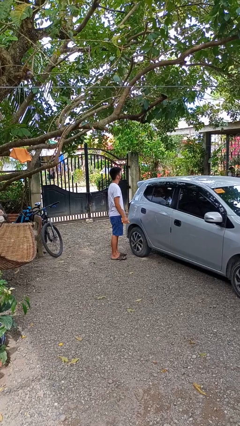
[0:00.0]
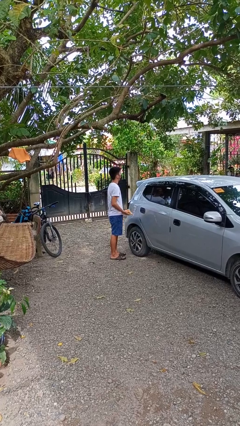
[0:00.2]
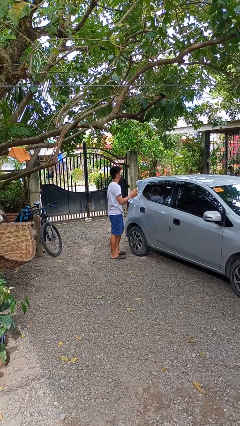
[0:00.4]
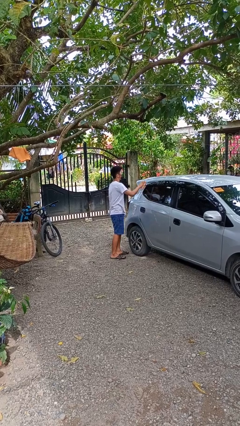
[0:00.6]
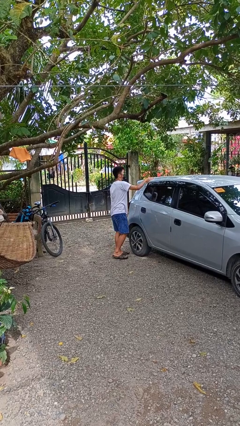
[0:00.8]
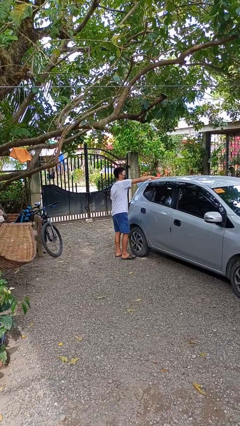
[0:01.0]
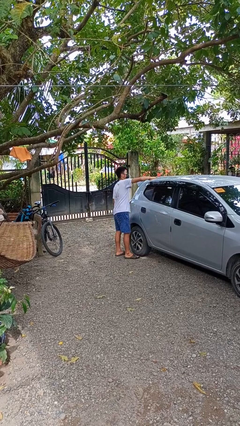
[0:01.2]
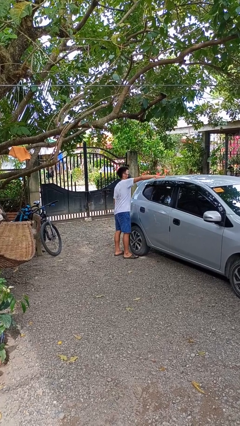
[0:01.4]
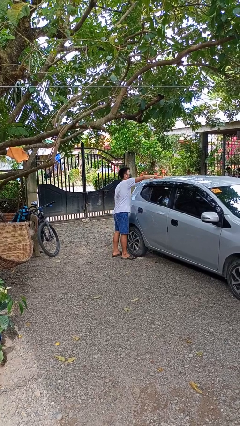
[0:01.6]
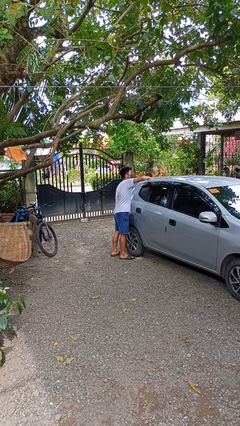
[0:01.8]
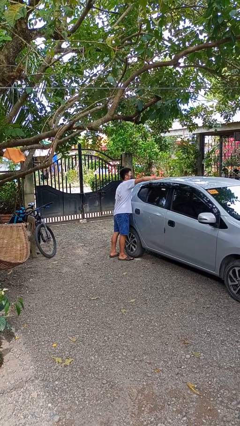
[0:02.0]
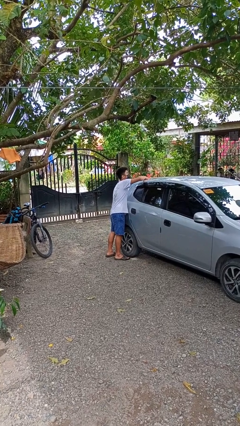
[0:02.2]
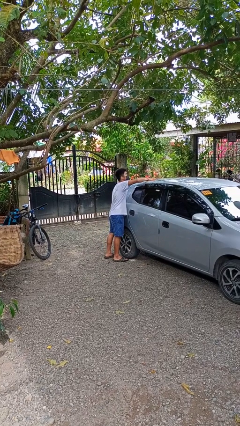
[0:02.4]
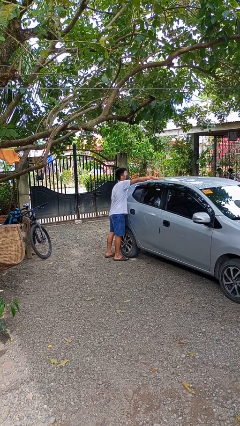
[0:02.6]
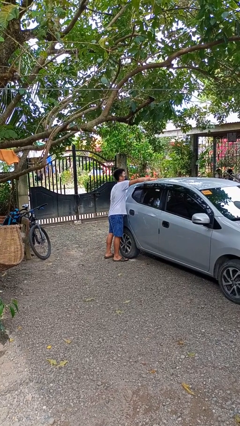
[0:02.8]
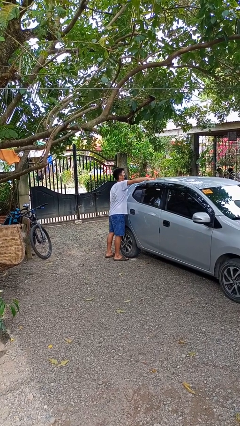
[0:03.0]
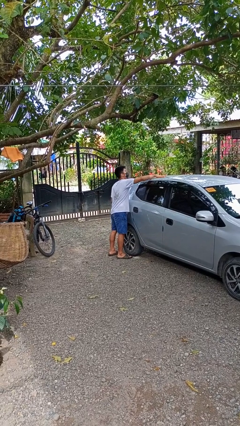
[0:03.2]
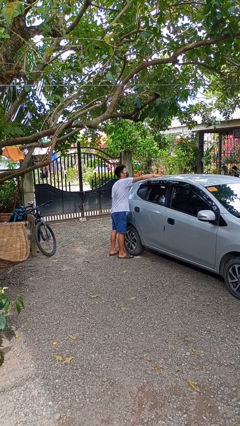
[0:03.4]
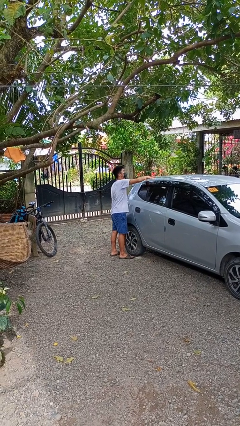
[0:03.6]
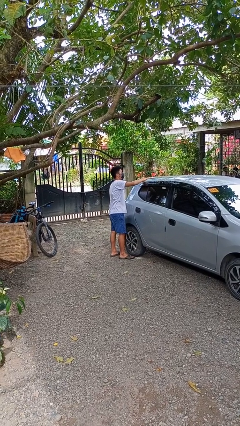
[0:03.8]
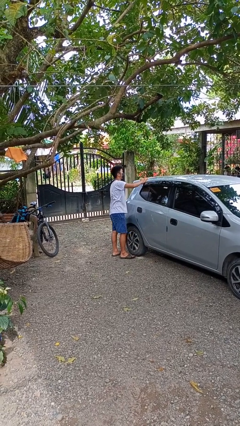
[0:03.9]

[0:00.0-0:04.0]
person polishes car with rag

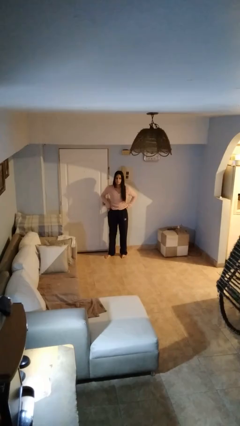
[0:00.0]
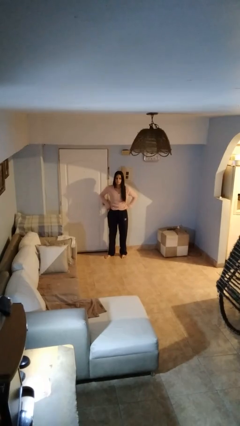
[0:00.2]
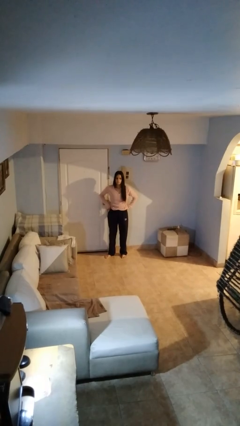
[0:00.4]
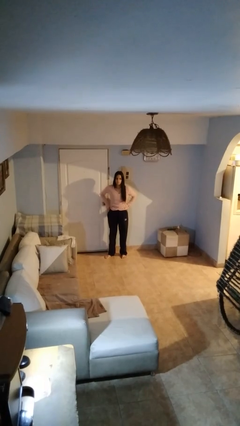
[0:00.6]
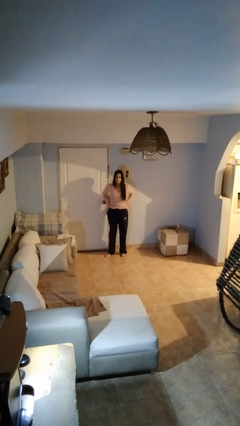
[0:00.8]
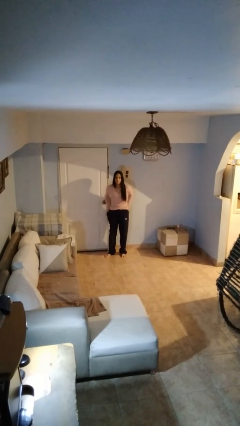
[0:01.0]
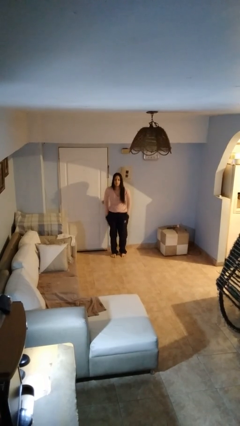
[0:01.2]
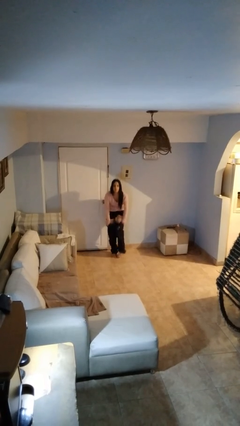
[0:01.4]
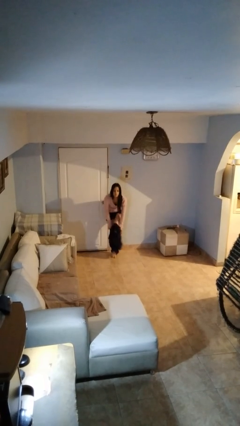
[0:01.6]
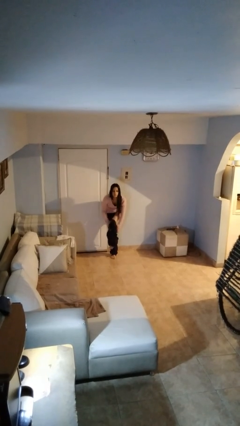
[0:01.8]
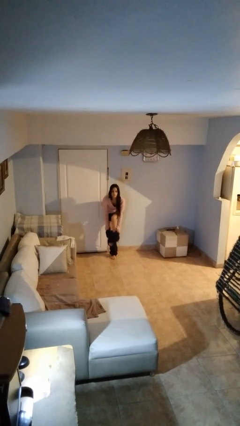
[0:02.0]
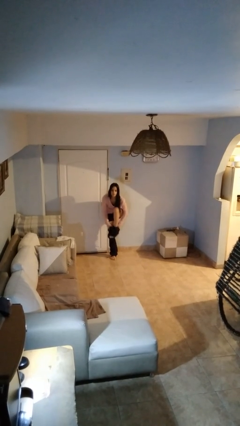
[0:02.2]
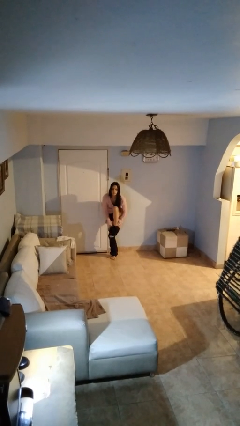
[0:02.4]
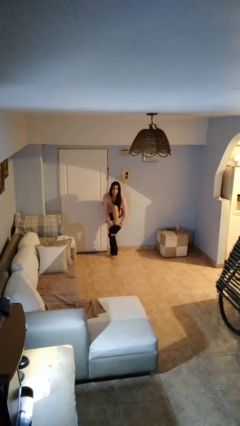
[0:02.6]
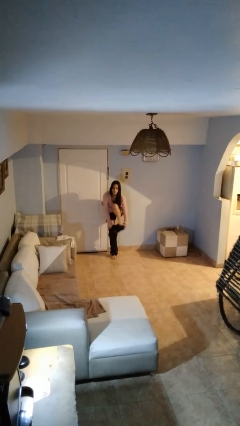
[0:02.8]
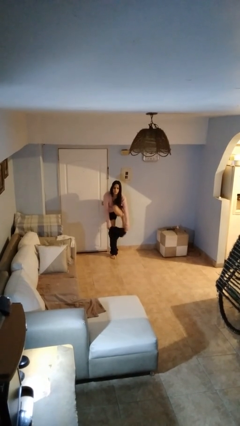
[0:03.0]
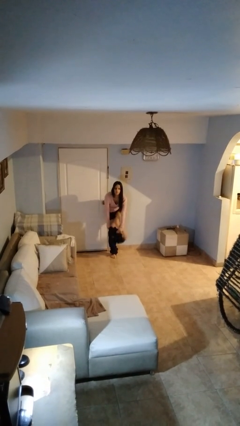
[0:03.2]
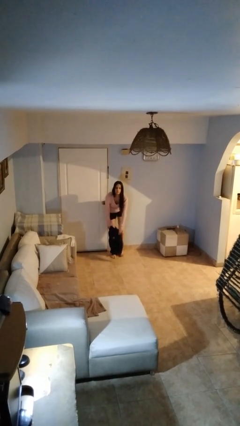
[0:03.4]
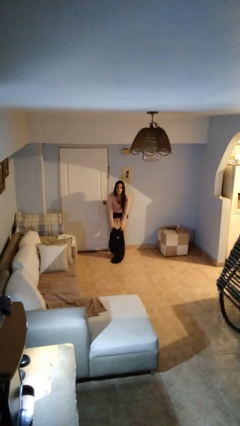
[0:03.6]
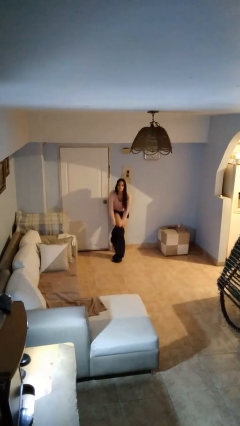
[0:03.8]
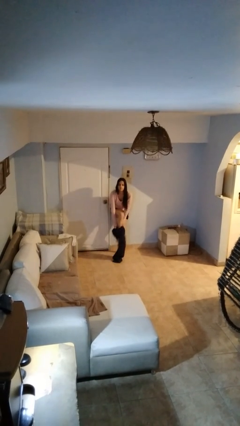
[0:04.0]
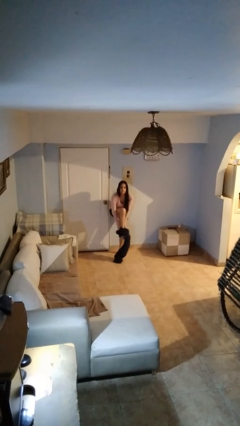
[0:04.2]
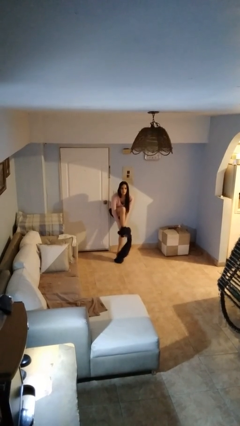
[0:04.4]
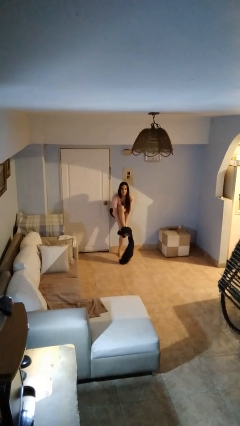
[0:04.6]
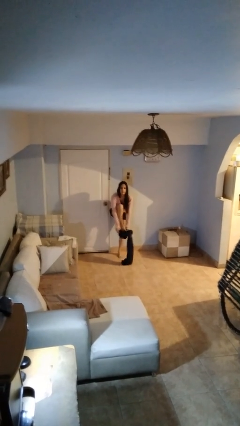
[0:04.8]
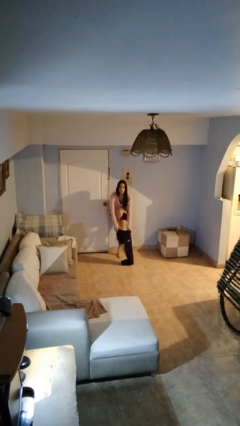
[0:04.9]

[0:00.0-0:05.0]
person puts on pants

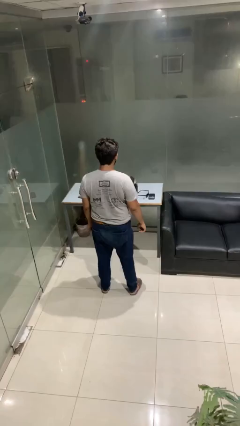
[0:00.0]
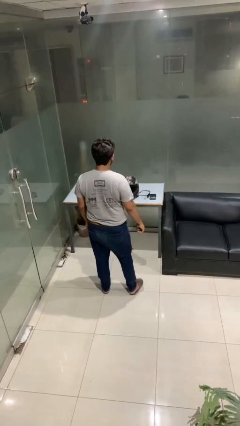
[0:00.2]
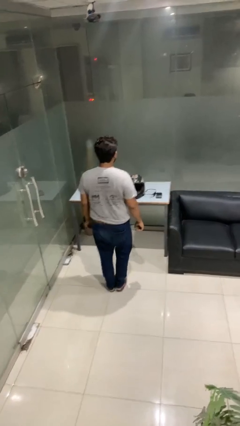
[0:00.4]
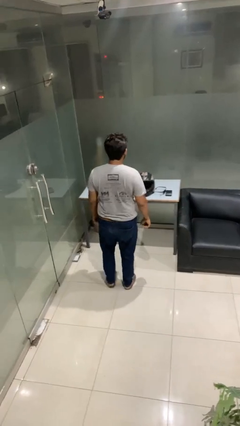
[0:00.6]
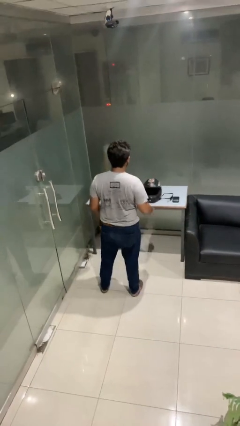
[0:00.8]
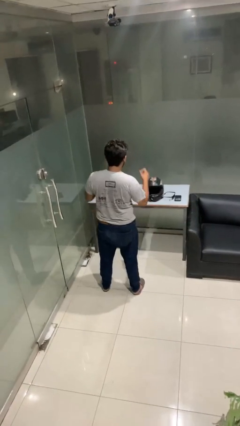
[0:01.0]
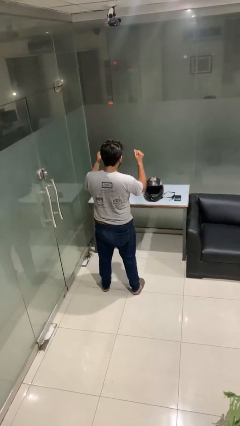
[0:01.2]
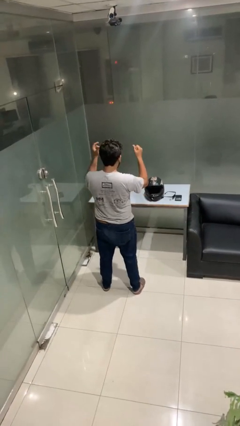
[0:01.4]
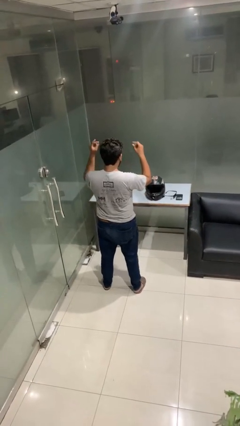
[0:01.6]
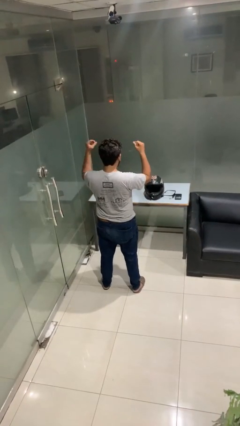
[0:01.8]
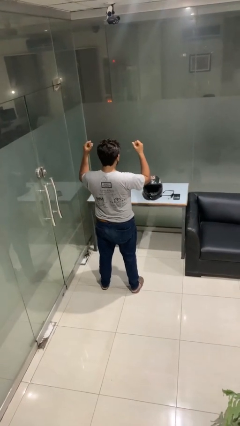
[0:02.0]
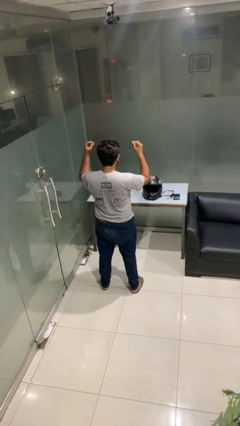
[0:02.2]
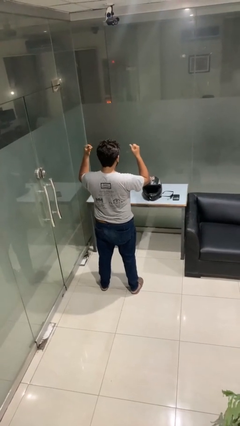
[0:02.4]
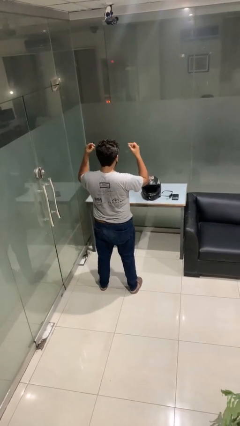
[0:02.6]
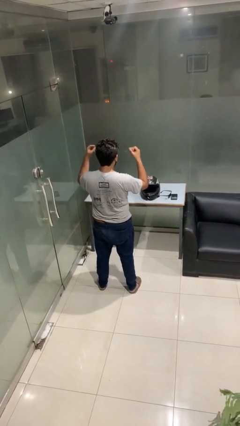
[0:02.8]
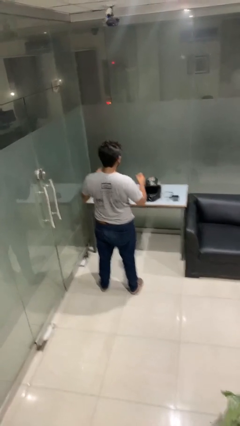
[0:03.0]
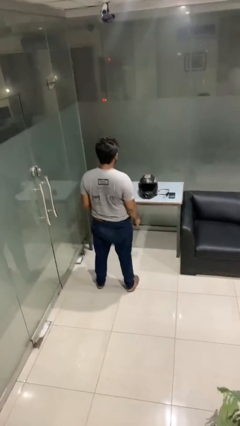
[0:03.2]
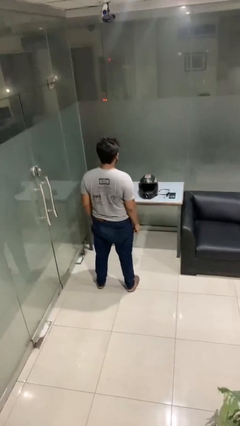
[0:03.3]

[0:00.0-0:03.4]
person snaps fingers

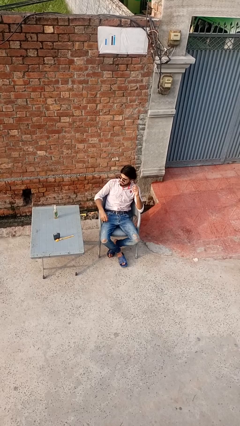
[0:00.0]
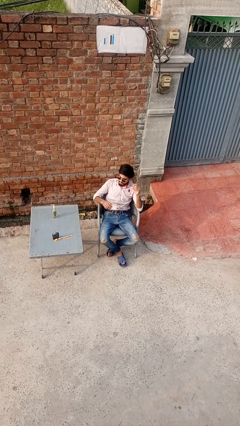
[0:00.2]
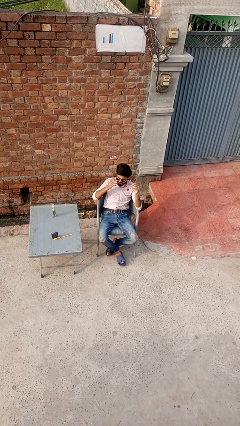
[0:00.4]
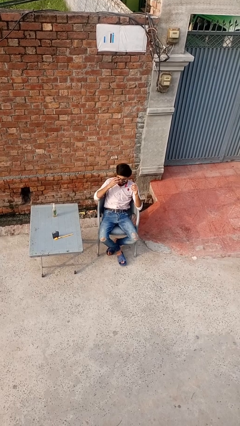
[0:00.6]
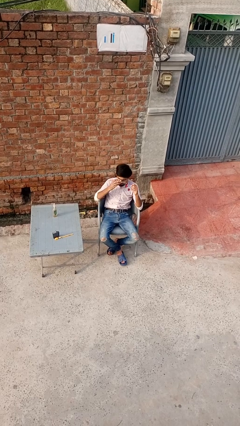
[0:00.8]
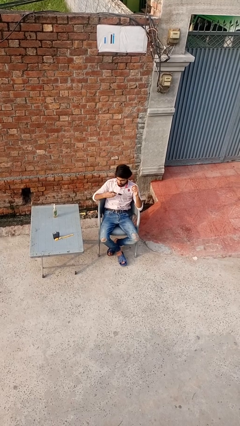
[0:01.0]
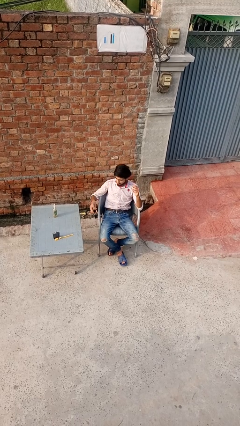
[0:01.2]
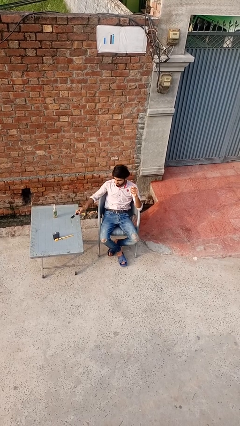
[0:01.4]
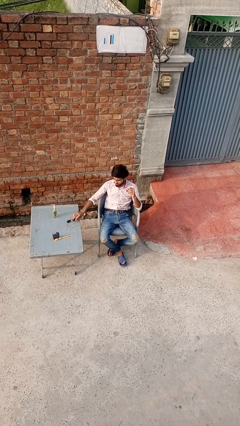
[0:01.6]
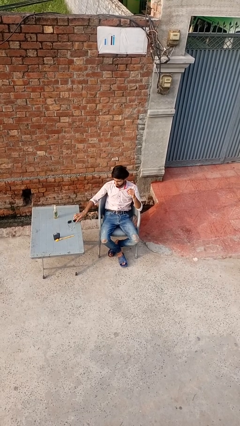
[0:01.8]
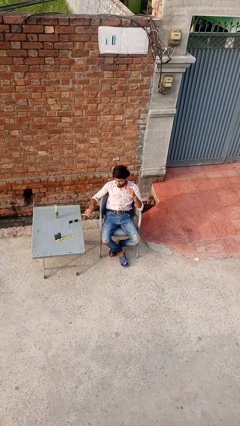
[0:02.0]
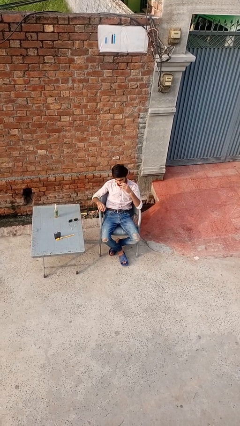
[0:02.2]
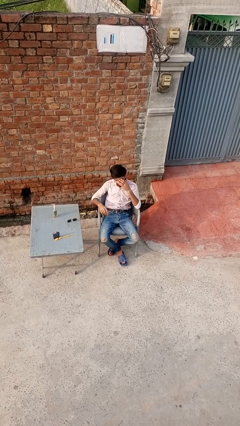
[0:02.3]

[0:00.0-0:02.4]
person takes off sunglasses

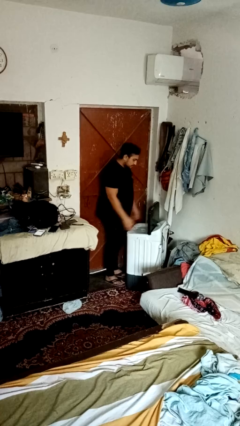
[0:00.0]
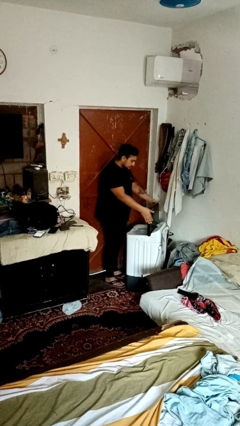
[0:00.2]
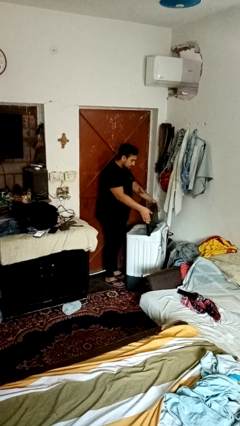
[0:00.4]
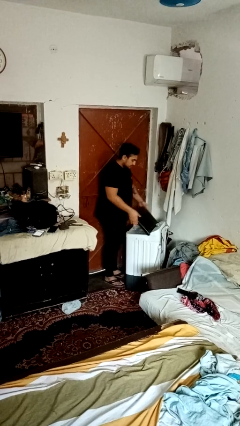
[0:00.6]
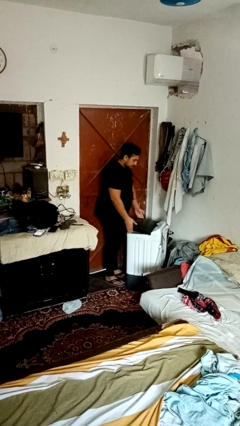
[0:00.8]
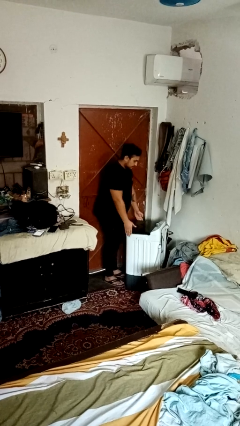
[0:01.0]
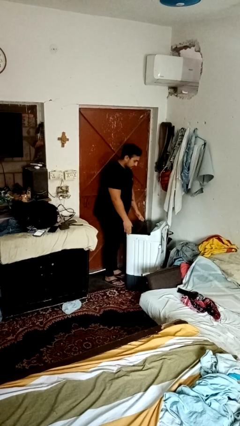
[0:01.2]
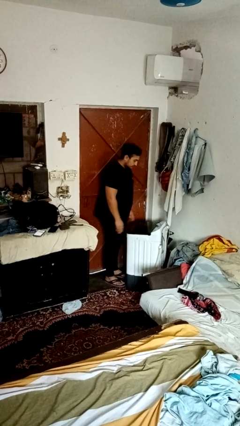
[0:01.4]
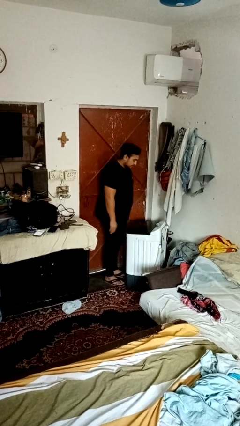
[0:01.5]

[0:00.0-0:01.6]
person closes clothes washer

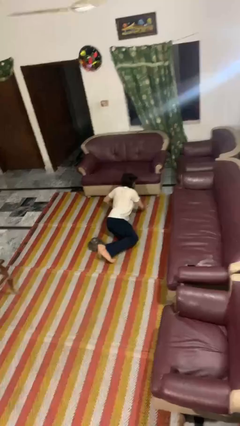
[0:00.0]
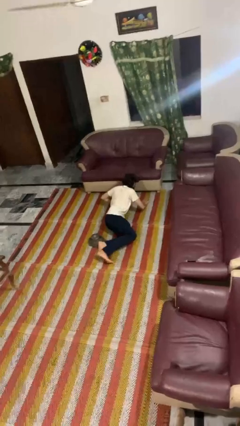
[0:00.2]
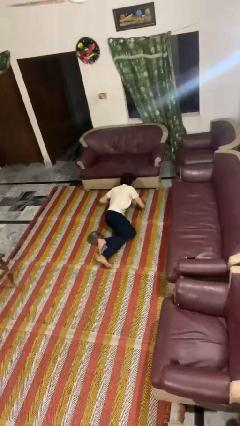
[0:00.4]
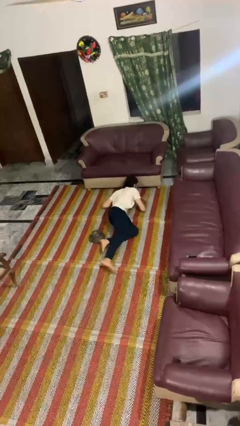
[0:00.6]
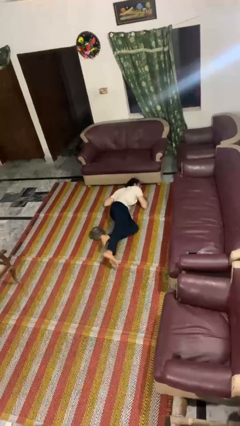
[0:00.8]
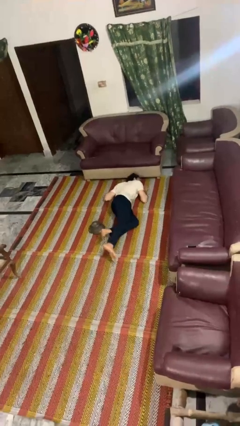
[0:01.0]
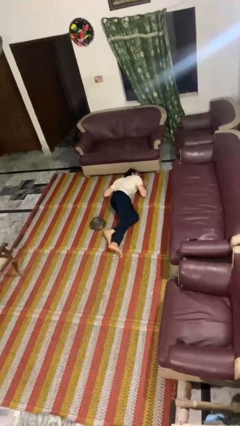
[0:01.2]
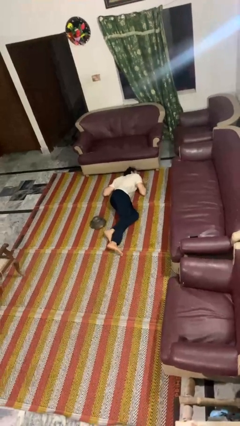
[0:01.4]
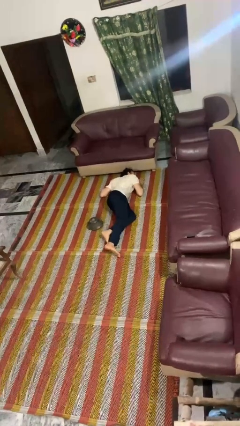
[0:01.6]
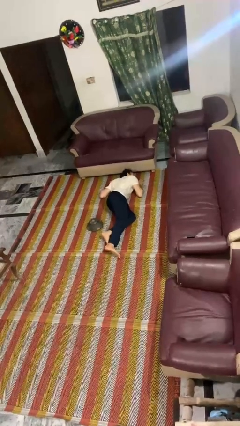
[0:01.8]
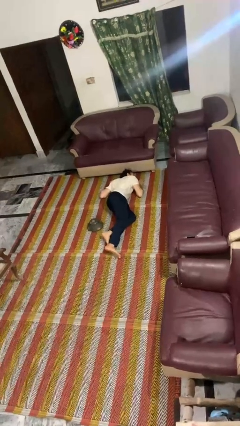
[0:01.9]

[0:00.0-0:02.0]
person lies down on floor
